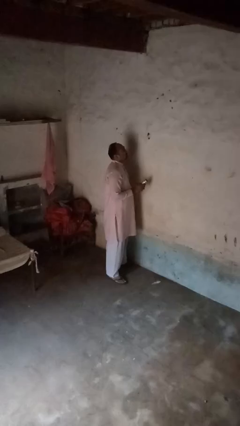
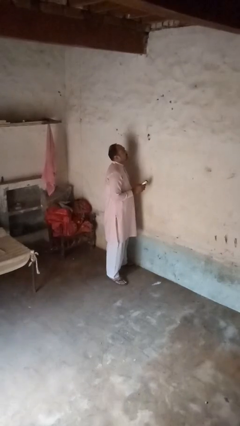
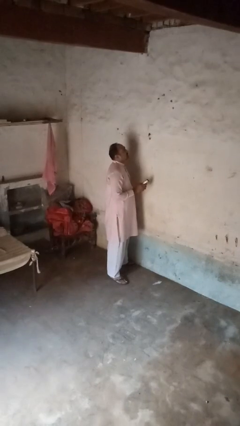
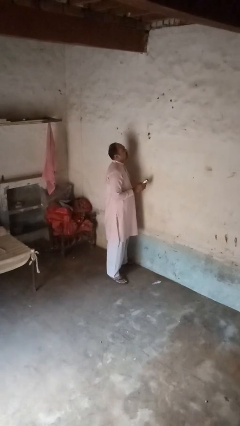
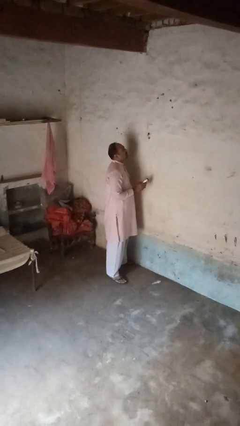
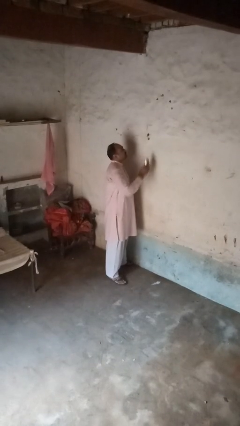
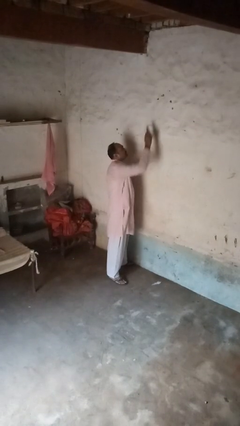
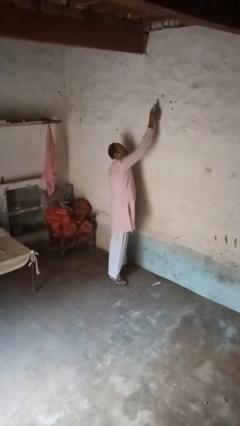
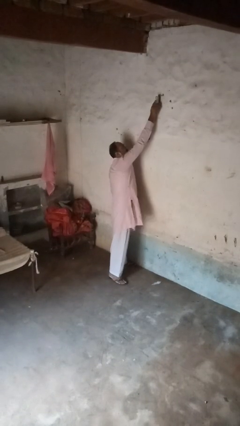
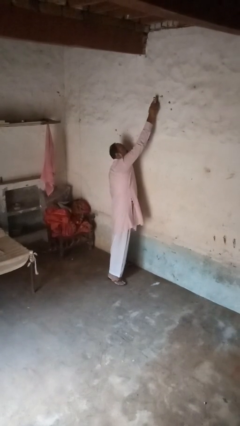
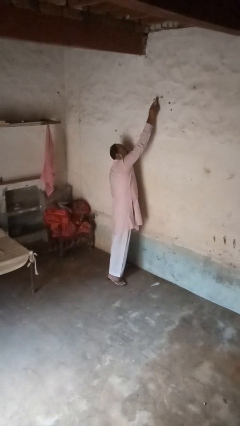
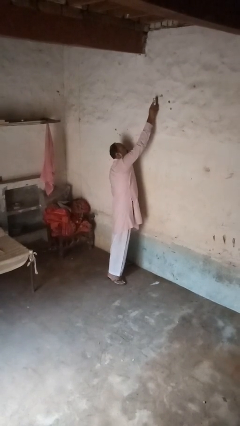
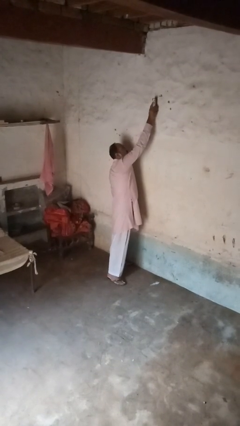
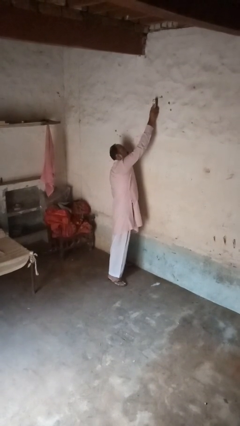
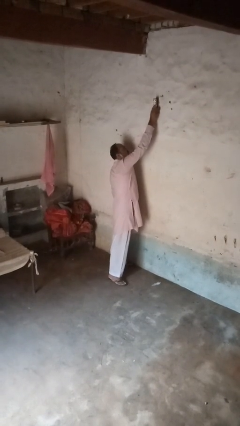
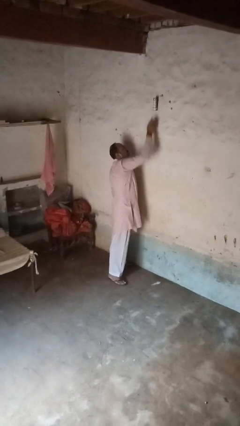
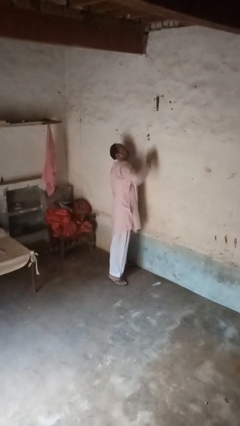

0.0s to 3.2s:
person adjusts thermostat

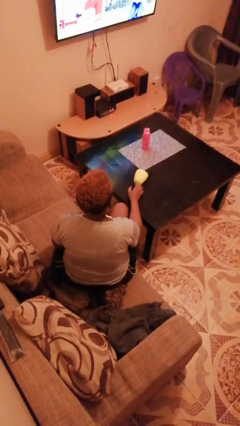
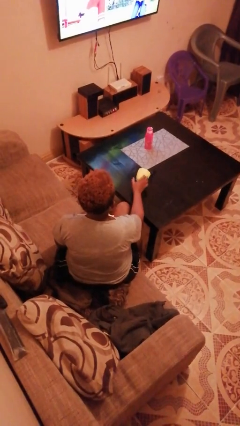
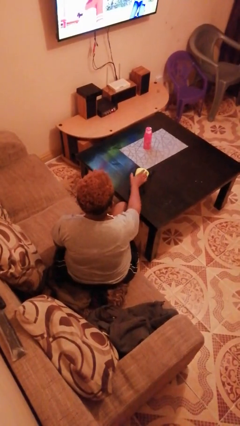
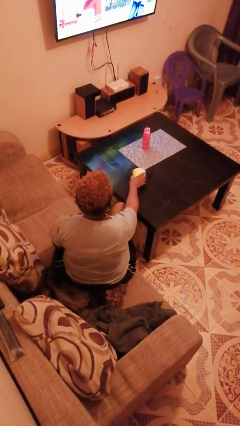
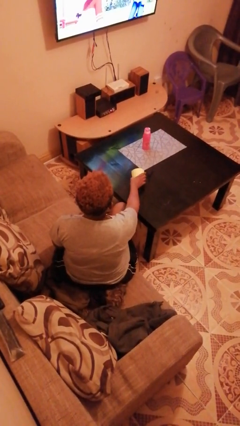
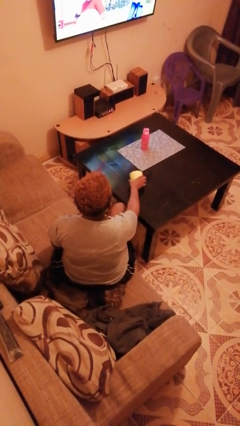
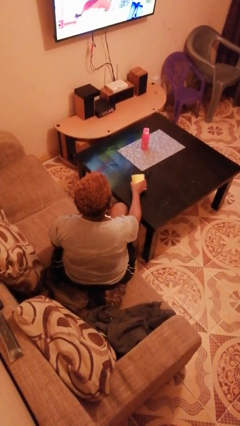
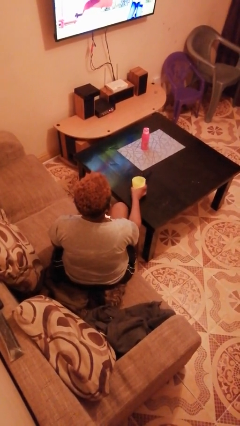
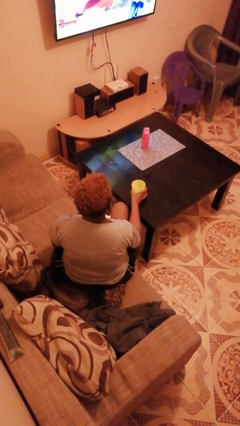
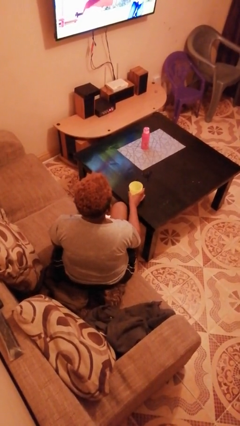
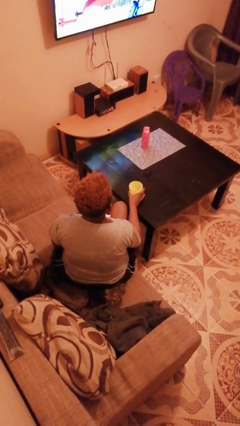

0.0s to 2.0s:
person sets upright glass

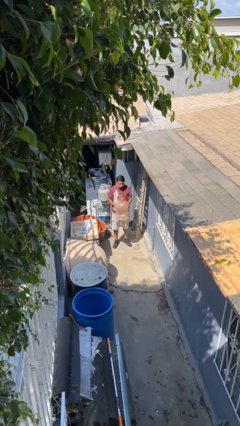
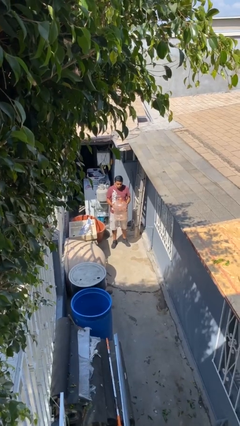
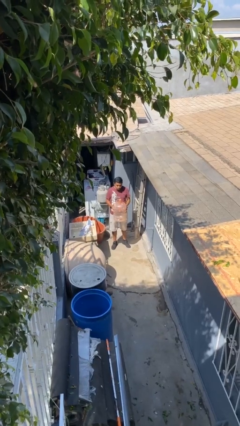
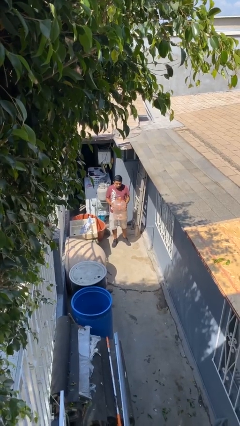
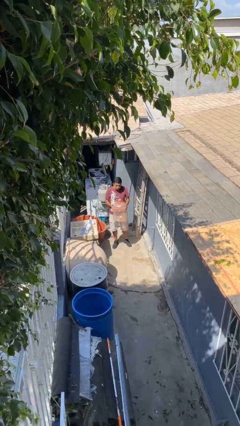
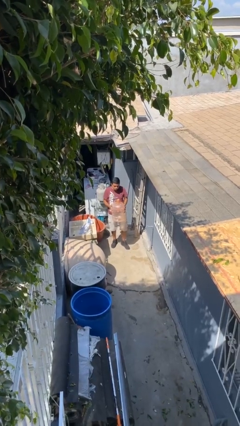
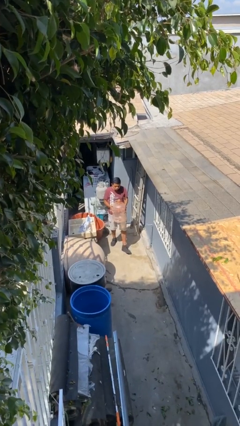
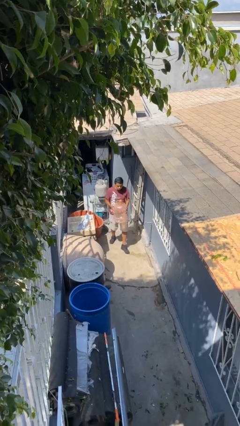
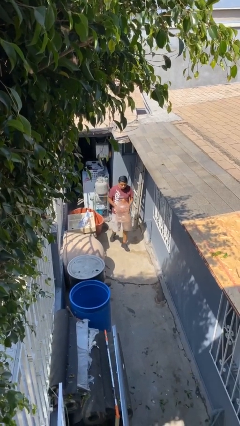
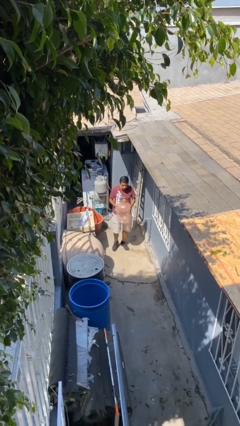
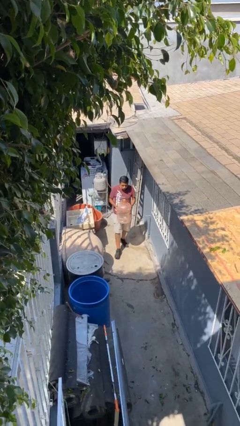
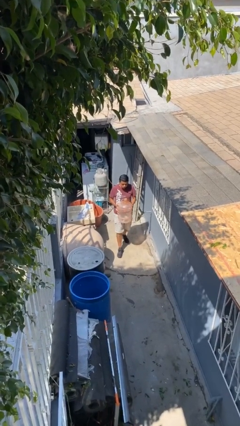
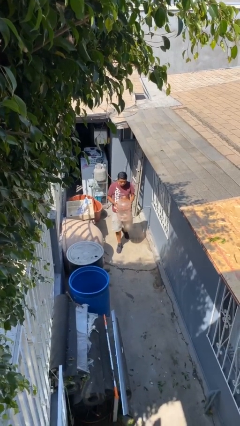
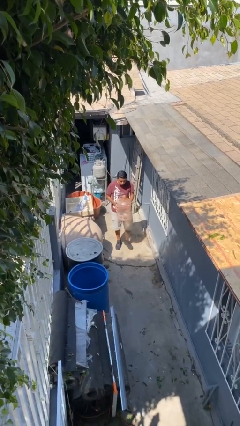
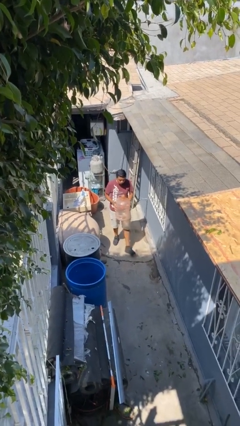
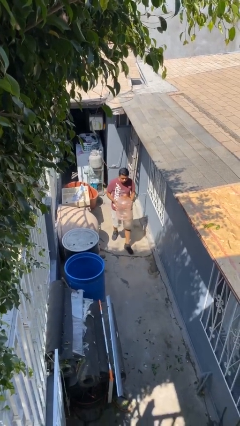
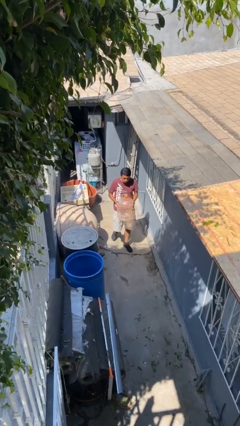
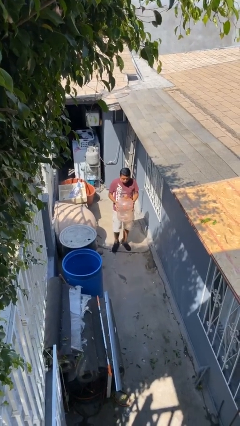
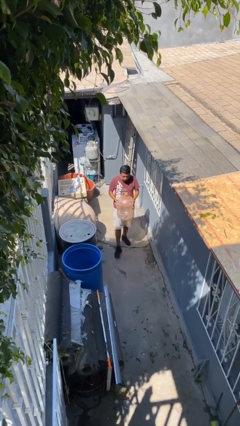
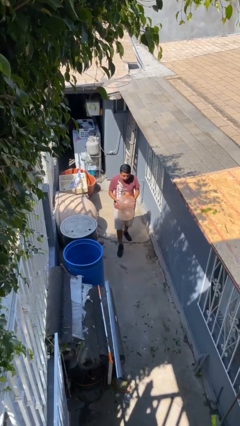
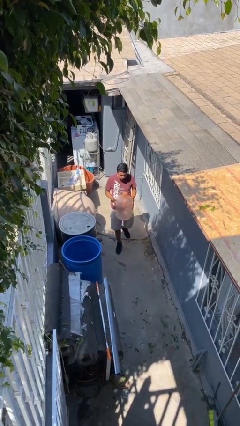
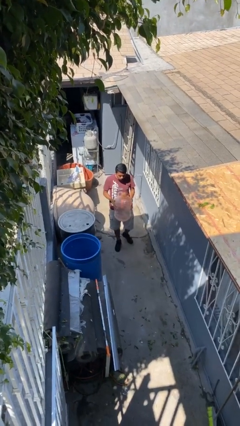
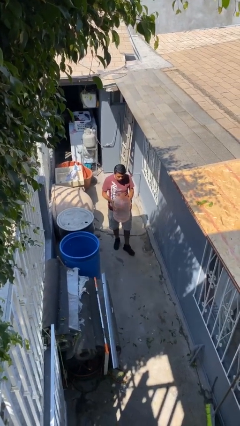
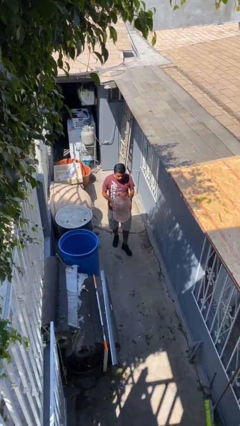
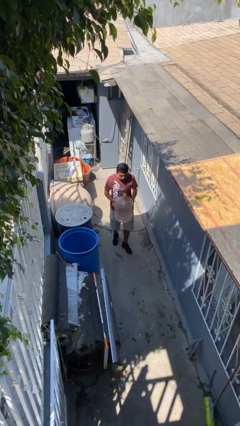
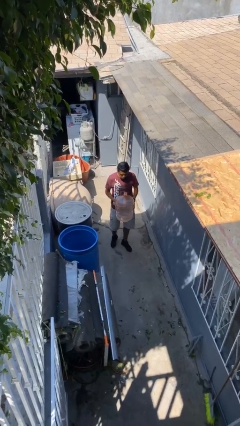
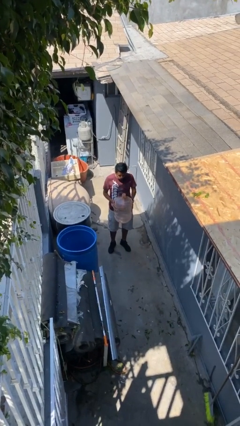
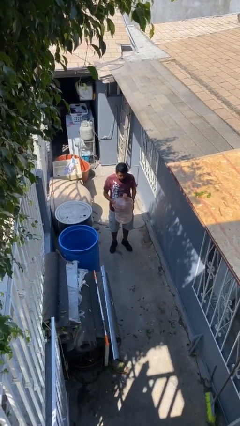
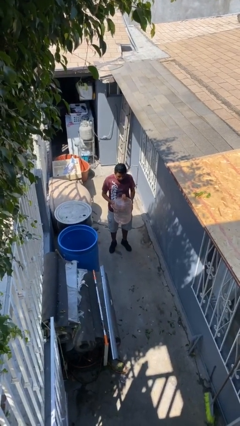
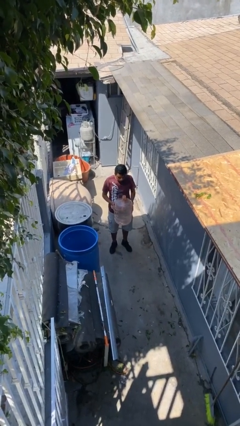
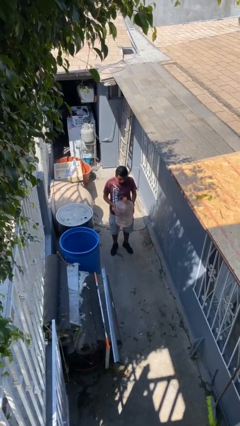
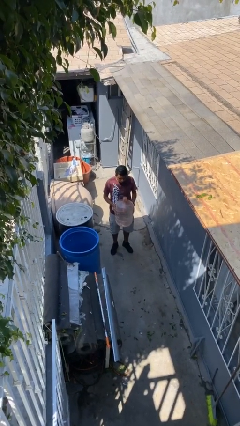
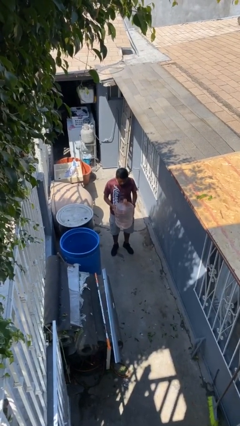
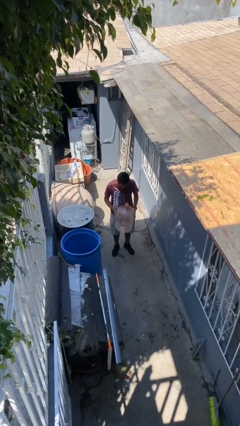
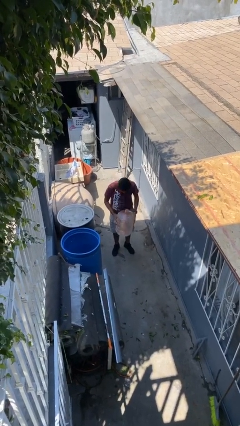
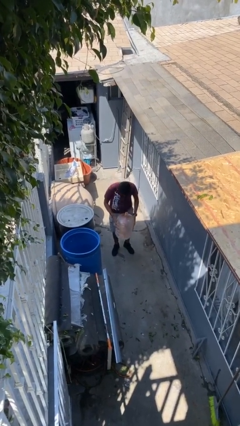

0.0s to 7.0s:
person carries heavy object

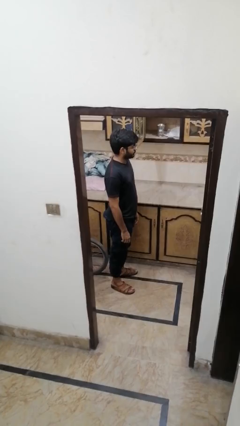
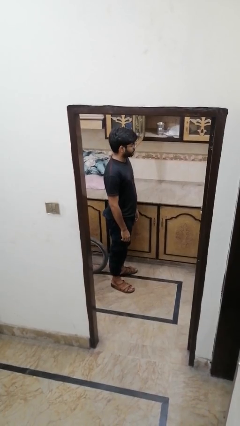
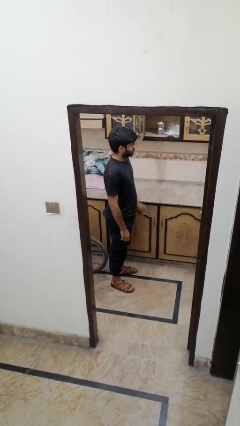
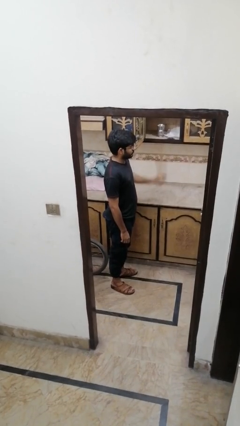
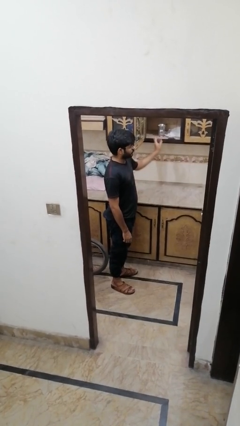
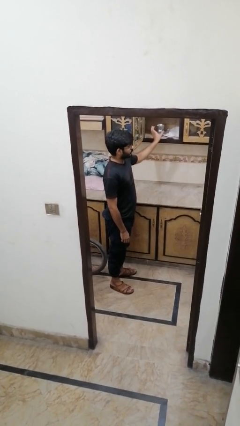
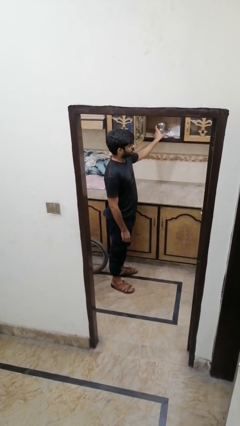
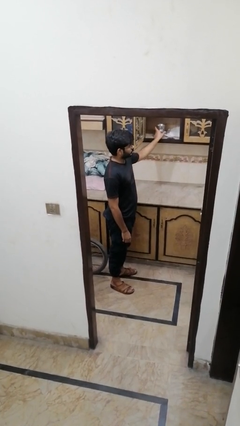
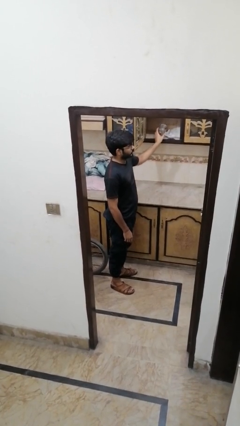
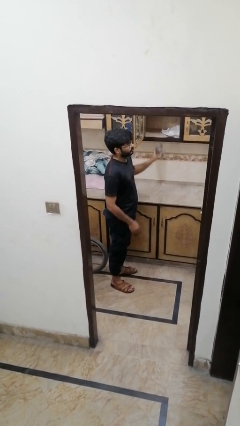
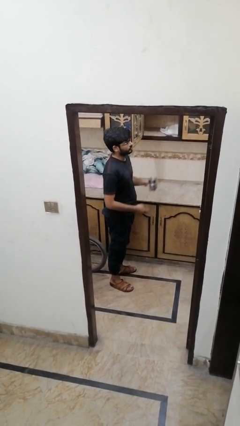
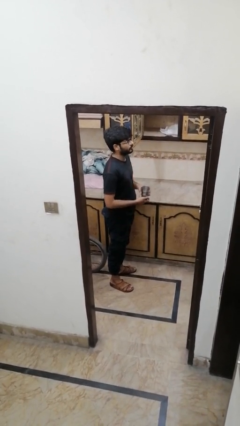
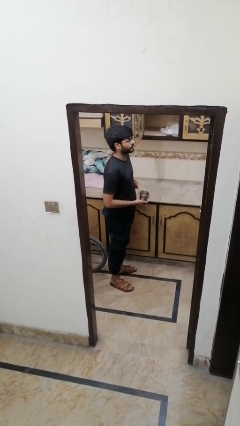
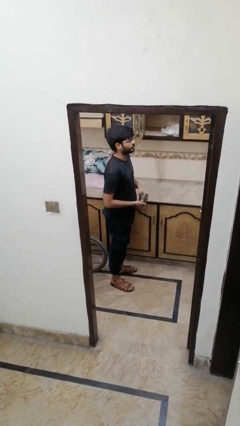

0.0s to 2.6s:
person picks up object from cabinet

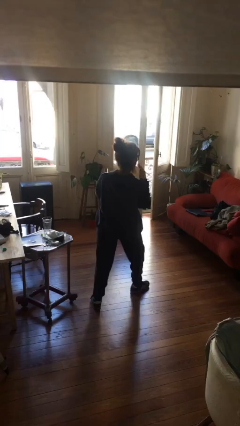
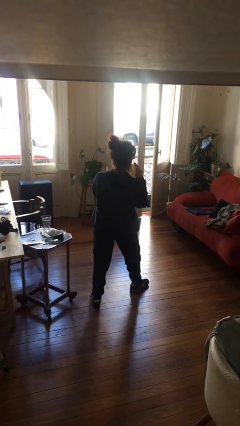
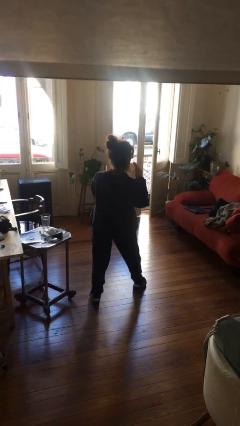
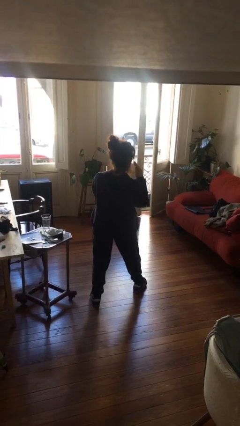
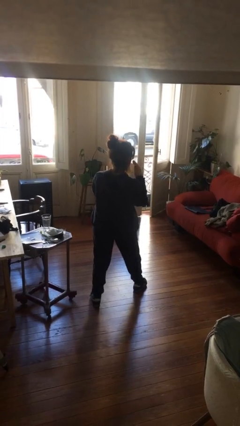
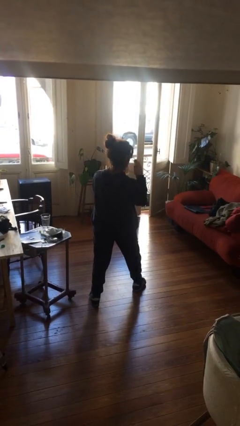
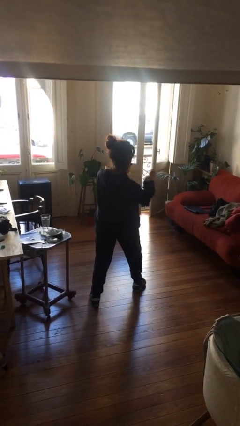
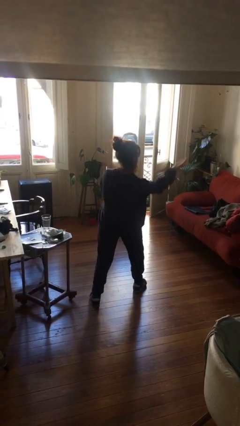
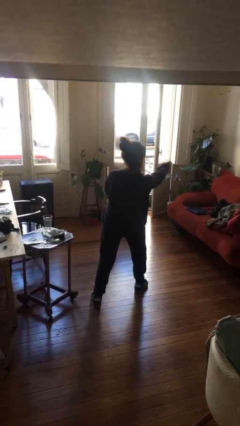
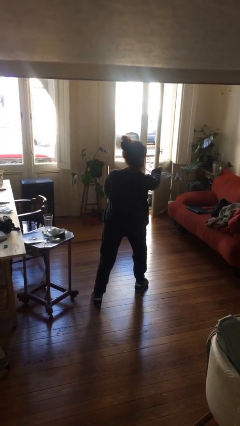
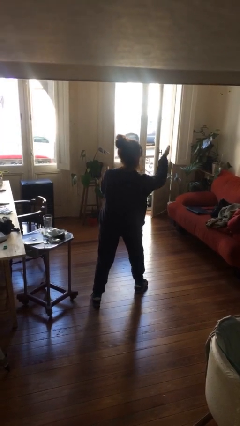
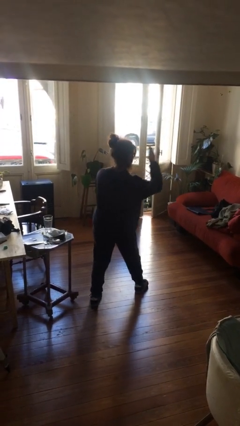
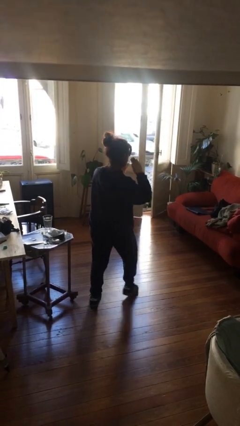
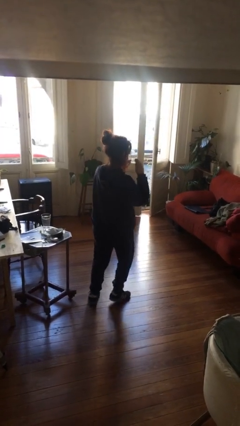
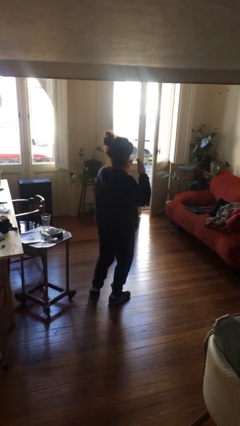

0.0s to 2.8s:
person karate chop

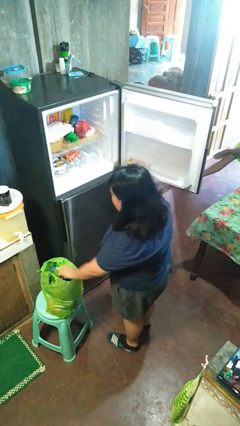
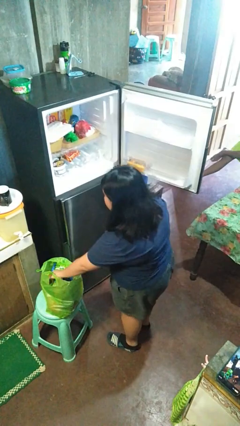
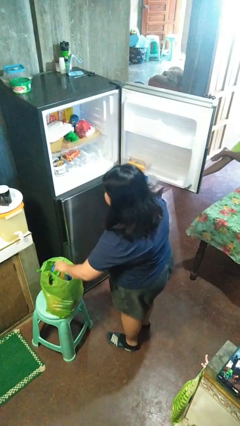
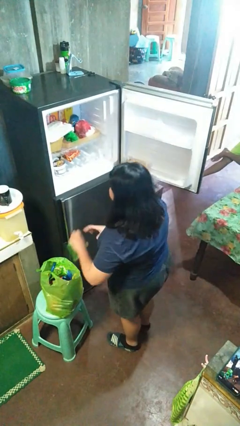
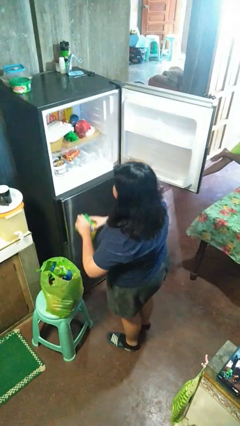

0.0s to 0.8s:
person loads groceries into refrigerator
